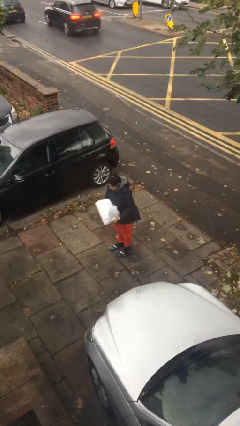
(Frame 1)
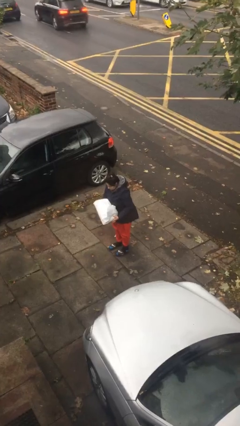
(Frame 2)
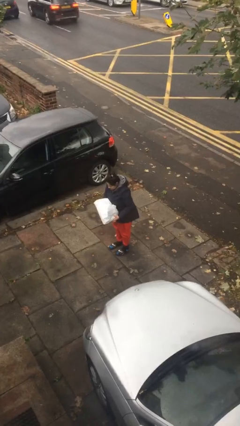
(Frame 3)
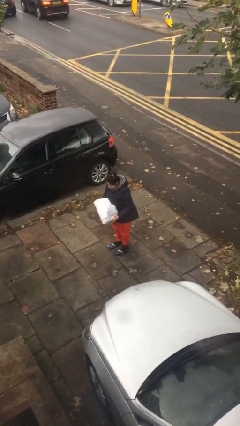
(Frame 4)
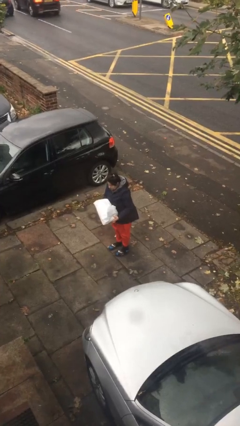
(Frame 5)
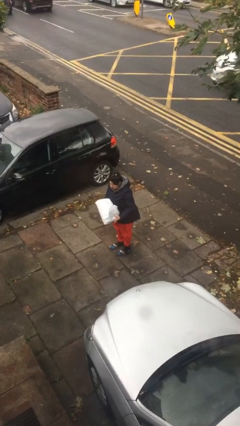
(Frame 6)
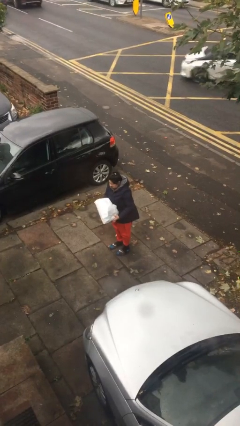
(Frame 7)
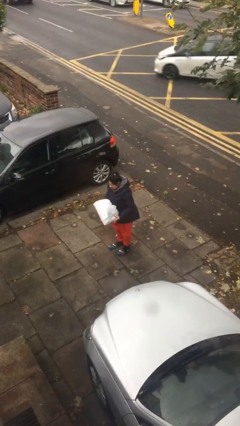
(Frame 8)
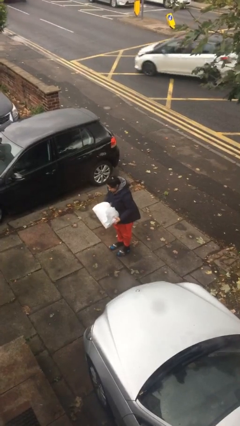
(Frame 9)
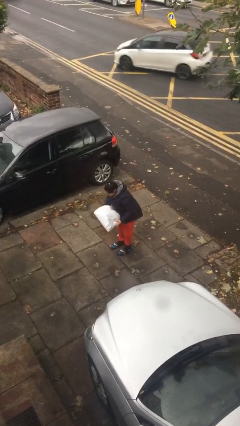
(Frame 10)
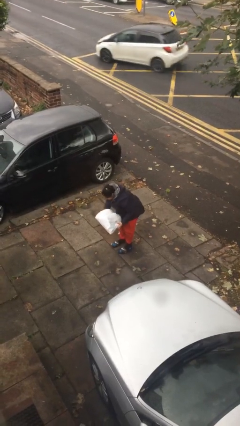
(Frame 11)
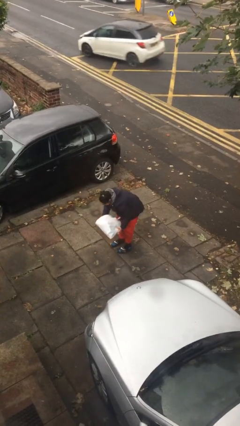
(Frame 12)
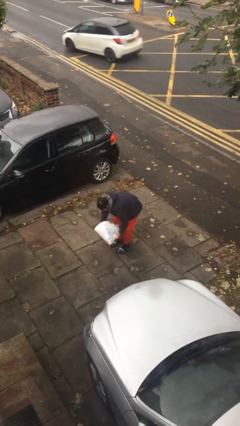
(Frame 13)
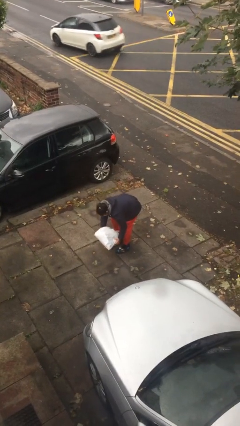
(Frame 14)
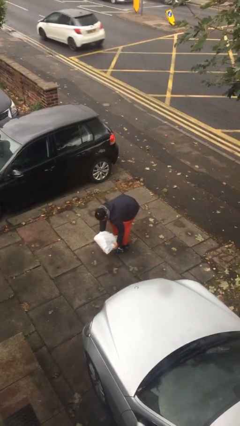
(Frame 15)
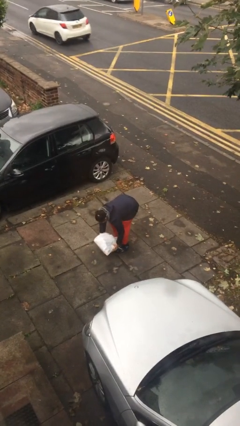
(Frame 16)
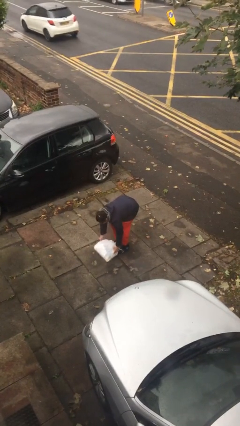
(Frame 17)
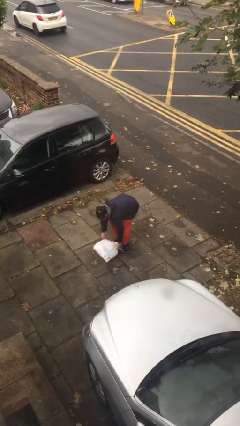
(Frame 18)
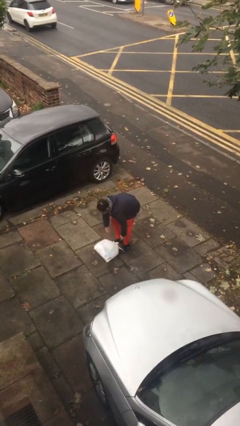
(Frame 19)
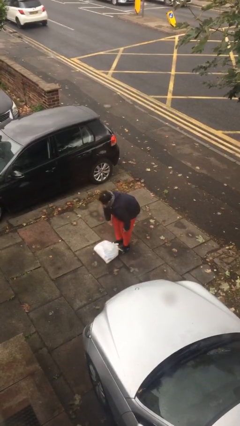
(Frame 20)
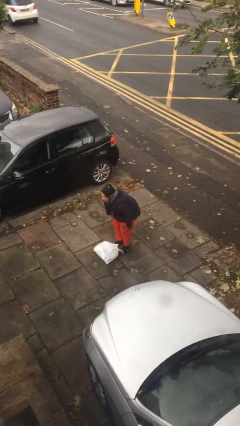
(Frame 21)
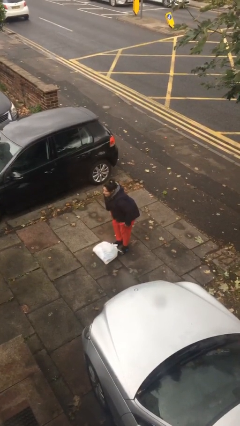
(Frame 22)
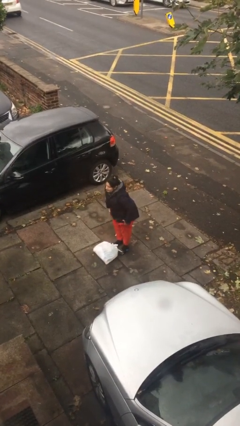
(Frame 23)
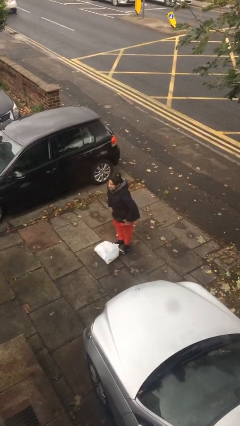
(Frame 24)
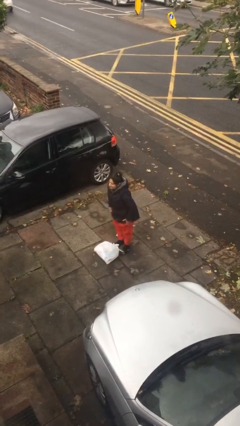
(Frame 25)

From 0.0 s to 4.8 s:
person puts down object on floor

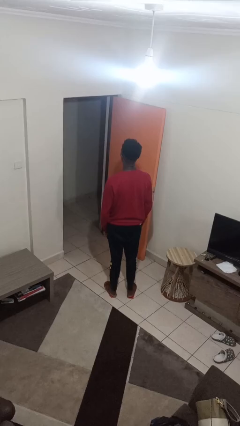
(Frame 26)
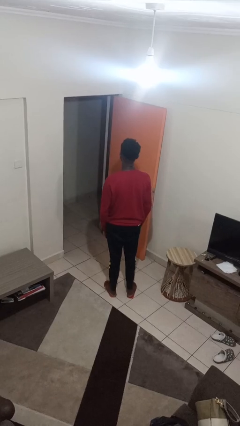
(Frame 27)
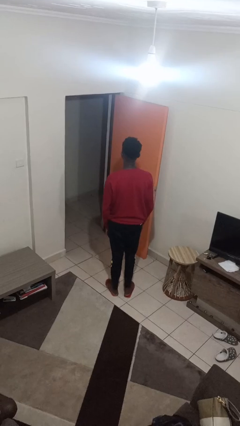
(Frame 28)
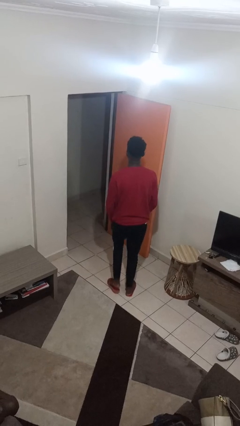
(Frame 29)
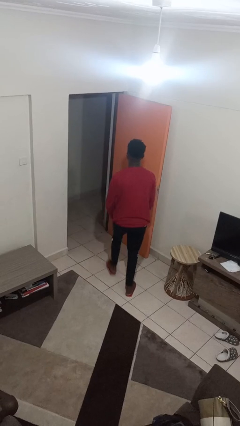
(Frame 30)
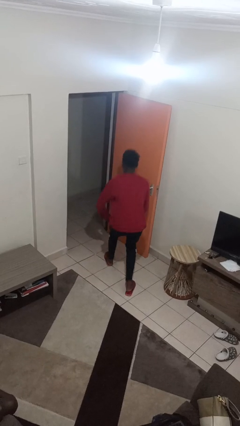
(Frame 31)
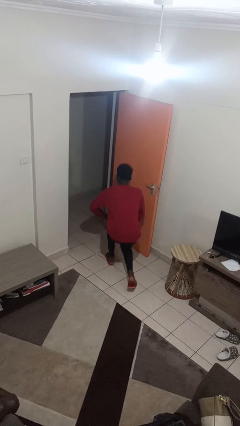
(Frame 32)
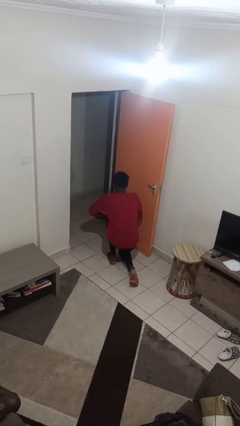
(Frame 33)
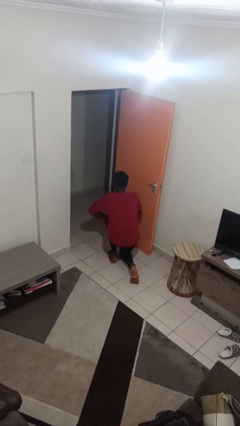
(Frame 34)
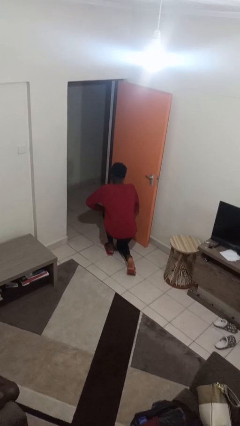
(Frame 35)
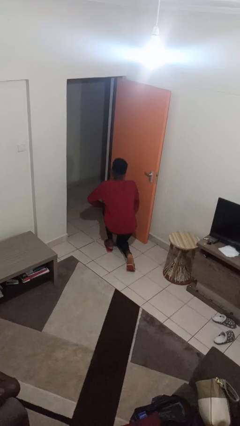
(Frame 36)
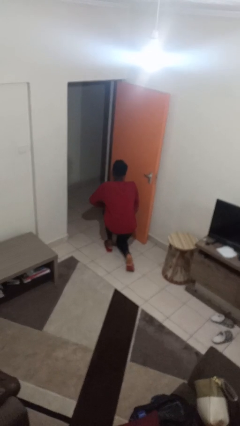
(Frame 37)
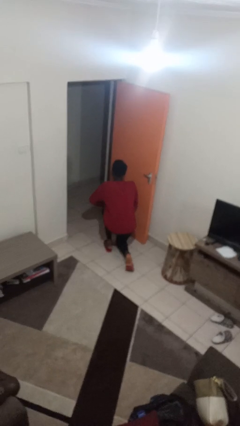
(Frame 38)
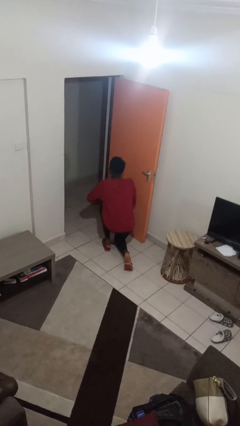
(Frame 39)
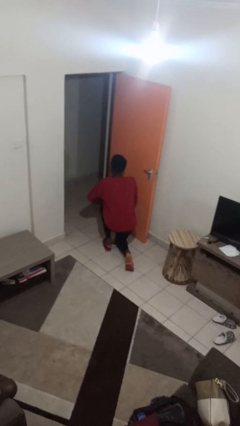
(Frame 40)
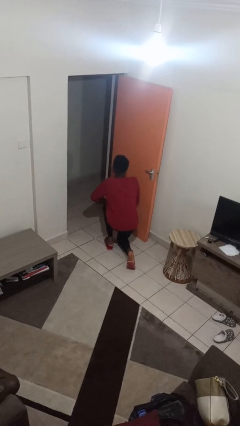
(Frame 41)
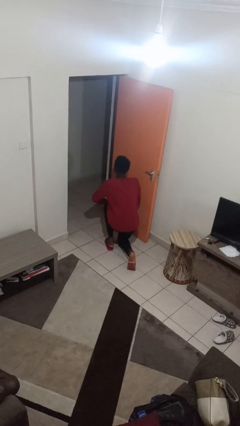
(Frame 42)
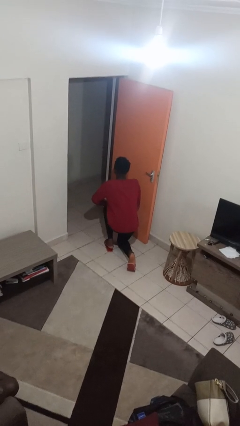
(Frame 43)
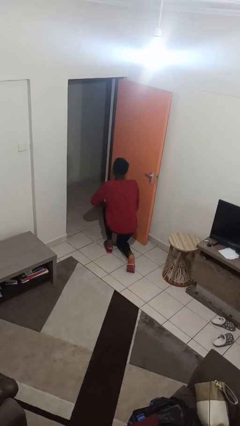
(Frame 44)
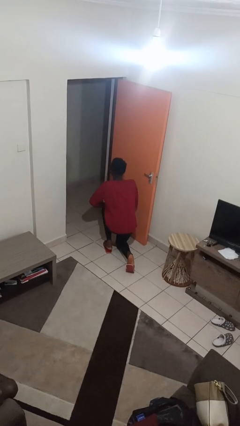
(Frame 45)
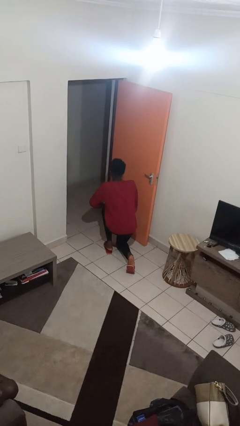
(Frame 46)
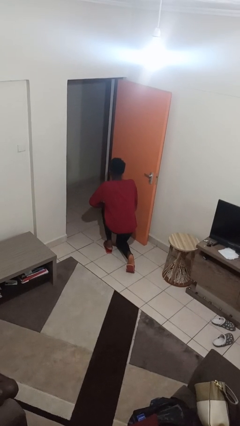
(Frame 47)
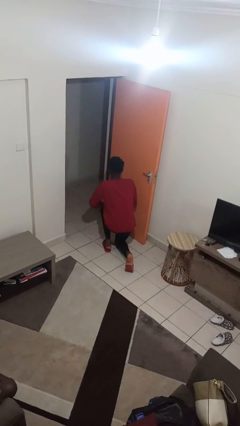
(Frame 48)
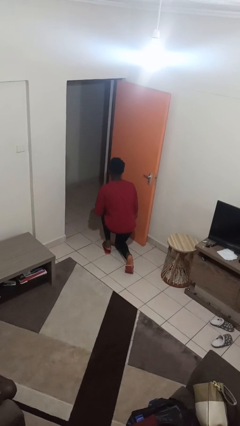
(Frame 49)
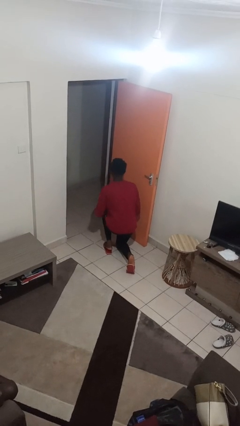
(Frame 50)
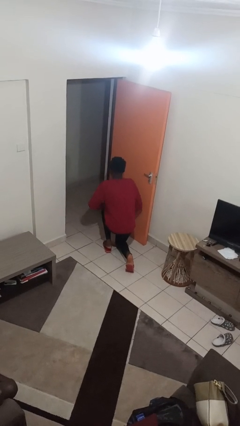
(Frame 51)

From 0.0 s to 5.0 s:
person kneels

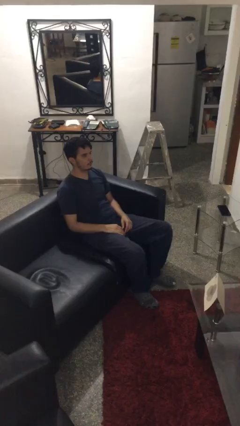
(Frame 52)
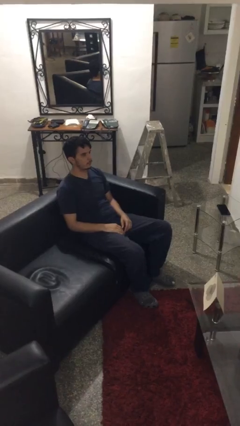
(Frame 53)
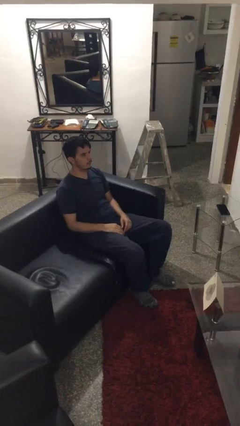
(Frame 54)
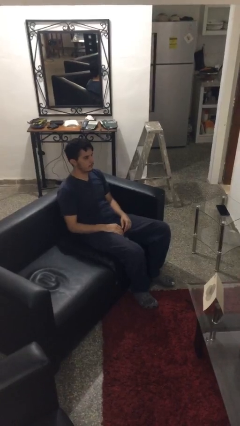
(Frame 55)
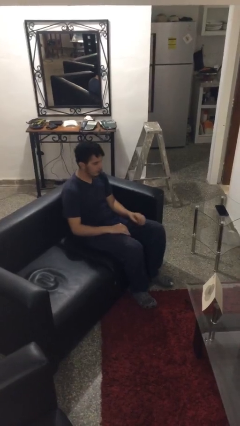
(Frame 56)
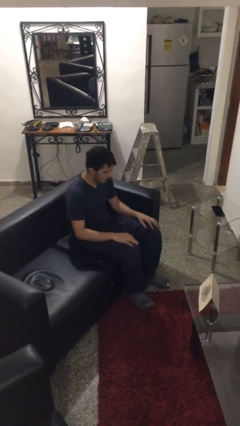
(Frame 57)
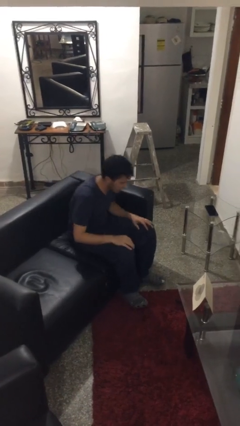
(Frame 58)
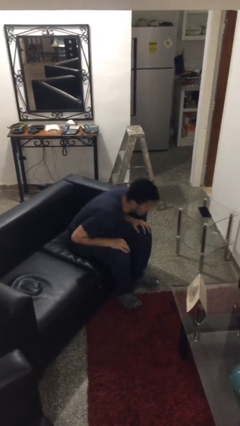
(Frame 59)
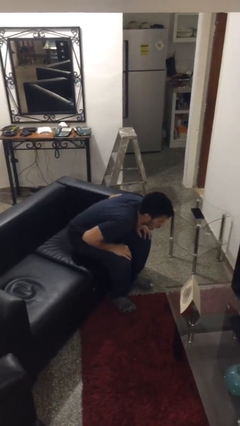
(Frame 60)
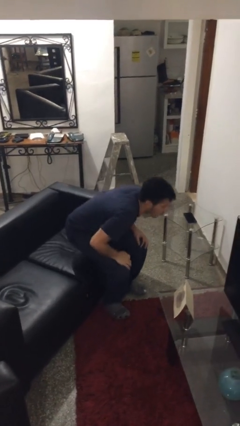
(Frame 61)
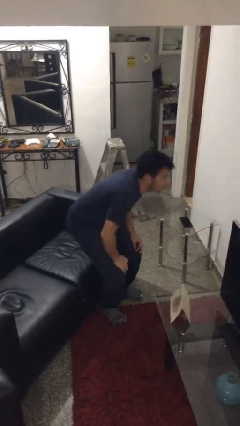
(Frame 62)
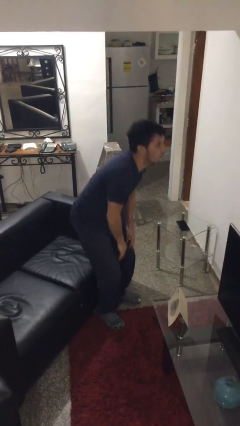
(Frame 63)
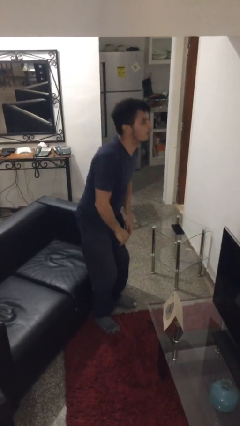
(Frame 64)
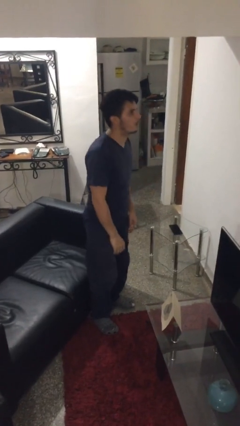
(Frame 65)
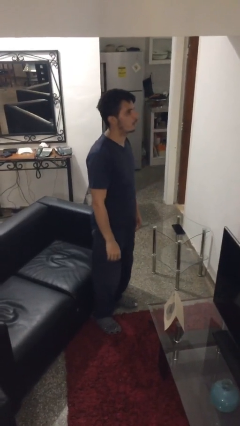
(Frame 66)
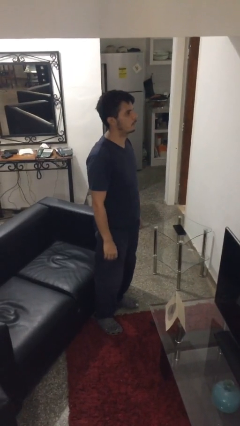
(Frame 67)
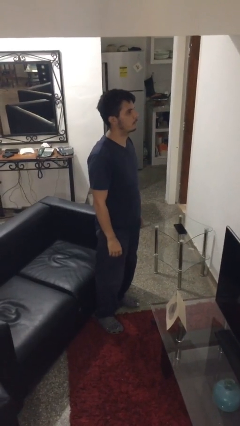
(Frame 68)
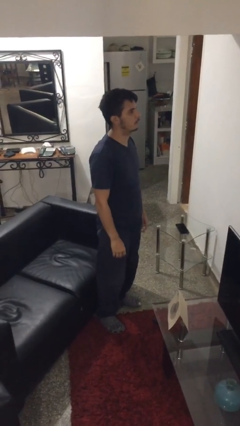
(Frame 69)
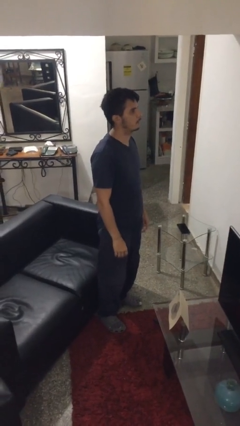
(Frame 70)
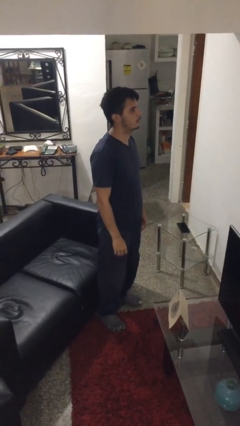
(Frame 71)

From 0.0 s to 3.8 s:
person stands up

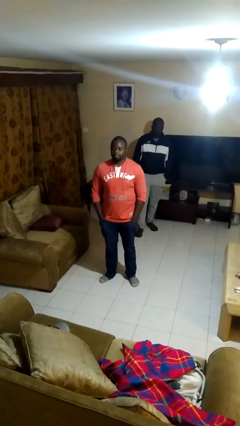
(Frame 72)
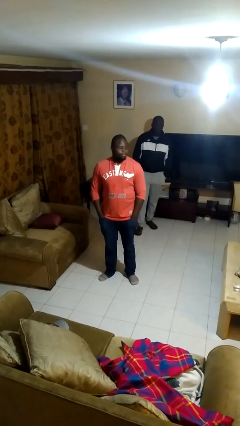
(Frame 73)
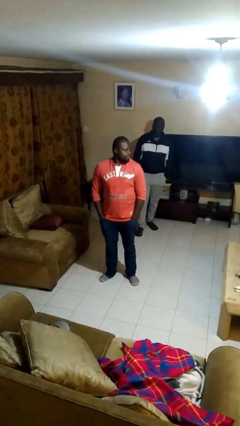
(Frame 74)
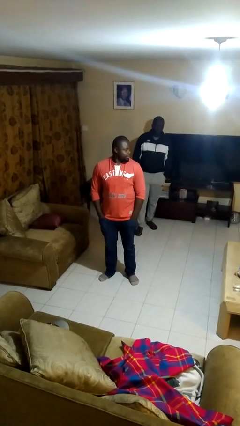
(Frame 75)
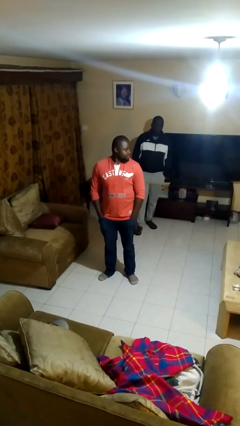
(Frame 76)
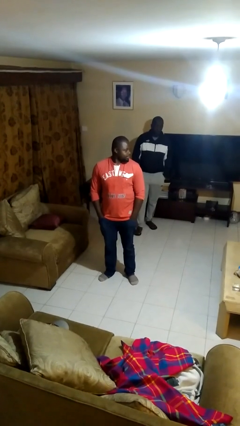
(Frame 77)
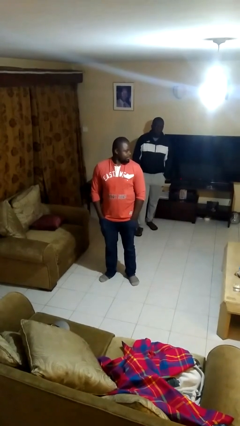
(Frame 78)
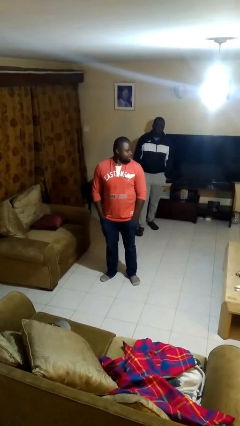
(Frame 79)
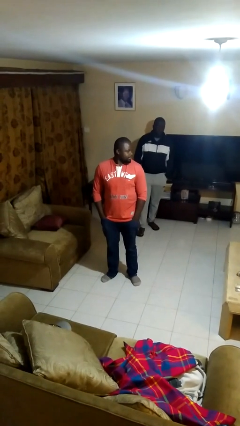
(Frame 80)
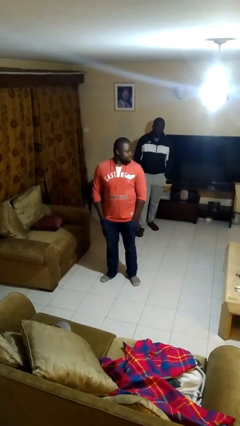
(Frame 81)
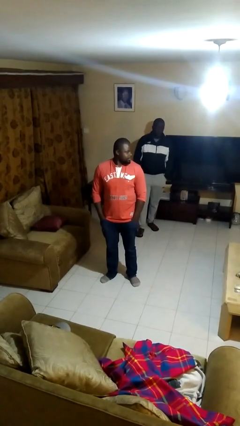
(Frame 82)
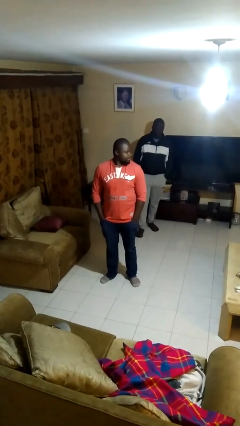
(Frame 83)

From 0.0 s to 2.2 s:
person looks over shoulder

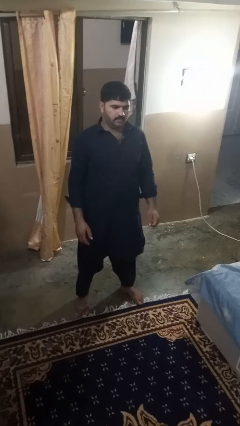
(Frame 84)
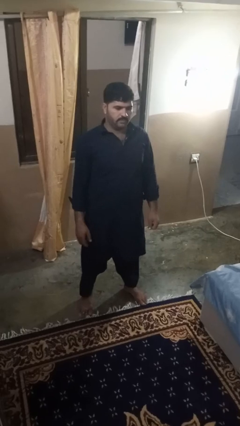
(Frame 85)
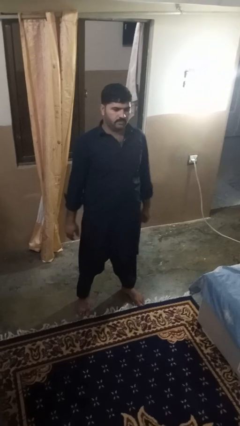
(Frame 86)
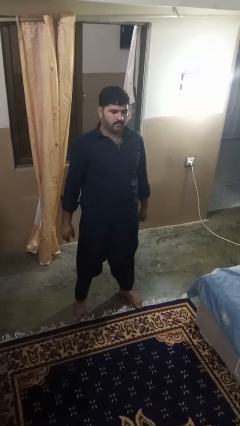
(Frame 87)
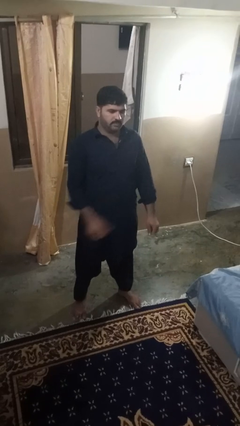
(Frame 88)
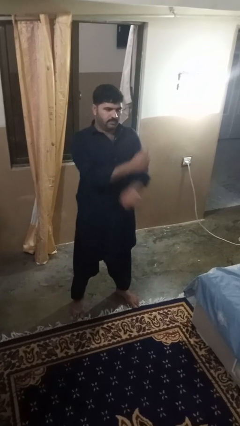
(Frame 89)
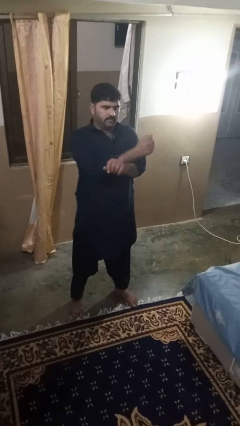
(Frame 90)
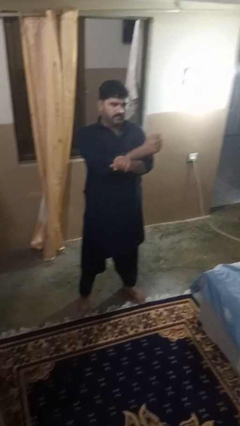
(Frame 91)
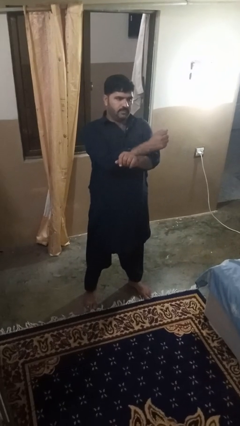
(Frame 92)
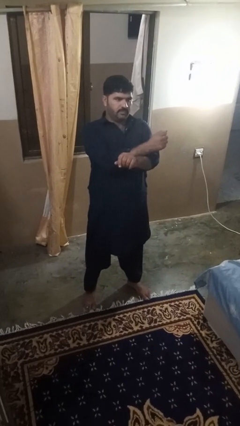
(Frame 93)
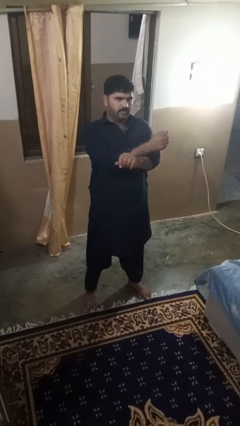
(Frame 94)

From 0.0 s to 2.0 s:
person crosses arms

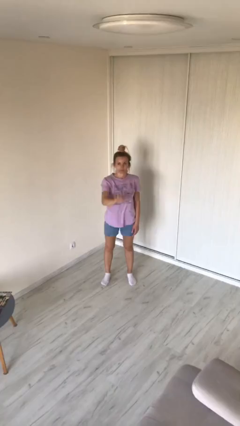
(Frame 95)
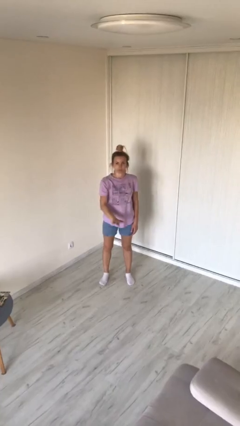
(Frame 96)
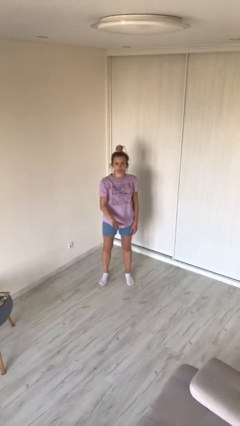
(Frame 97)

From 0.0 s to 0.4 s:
person gestures swipe down
